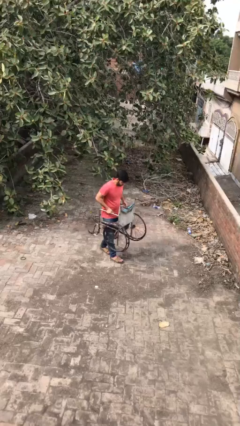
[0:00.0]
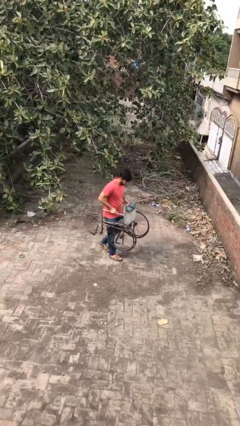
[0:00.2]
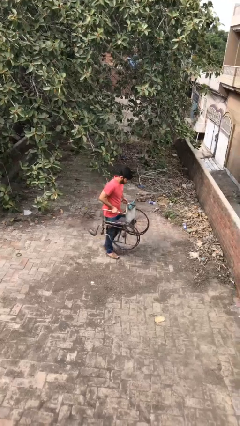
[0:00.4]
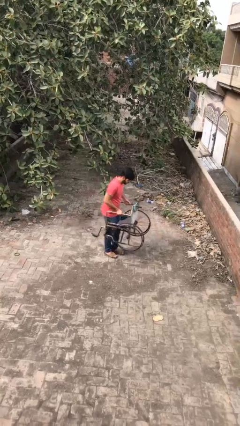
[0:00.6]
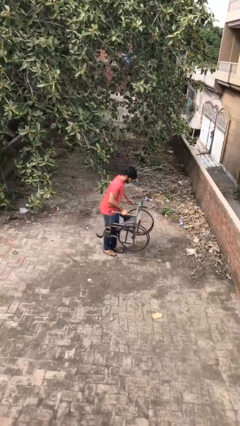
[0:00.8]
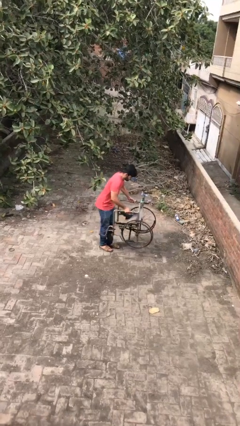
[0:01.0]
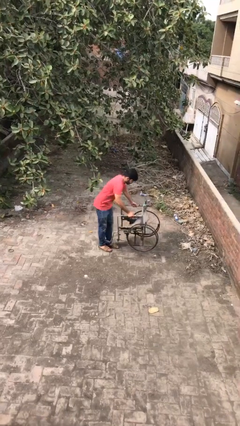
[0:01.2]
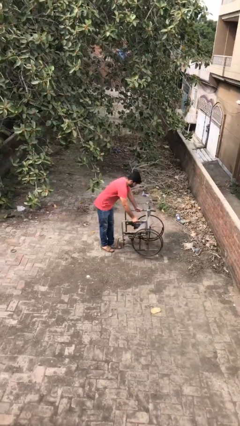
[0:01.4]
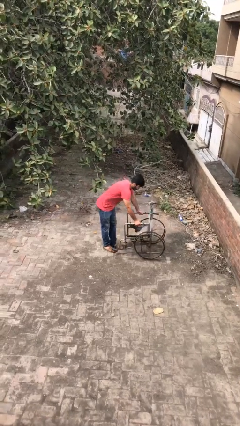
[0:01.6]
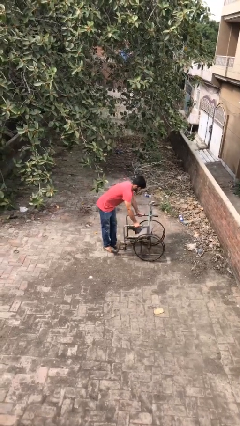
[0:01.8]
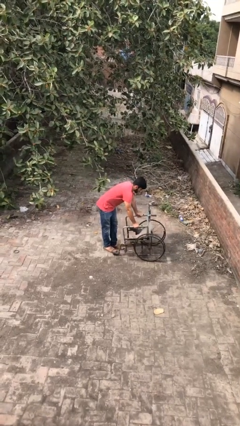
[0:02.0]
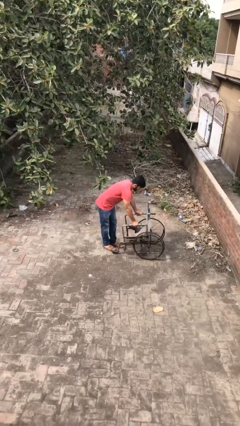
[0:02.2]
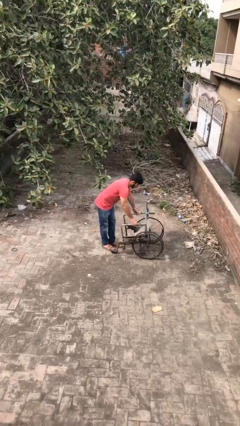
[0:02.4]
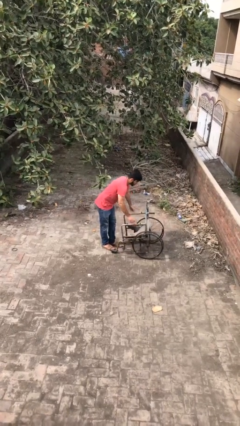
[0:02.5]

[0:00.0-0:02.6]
person puts down object on floor

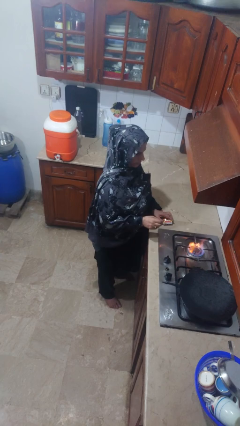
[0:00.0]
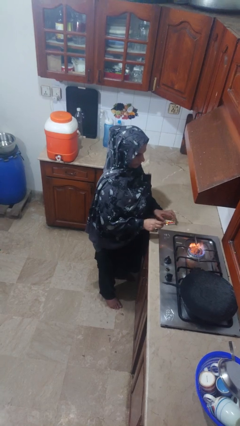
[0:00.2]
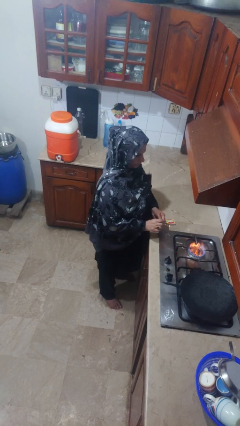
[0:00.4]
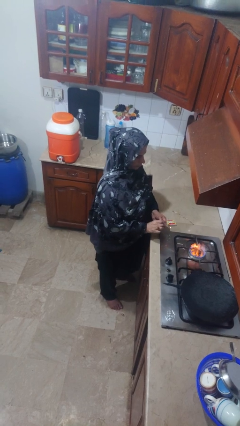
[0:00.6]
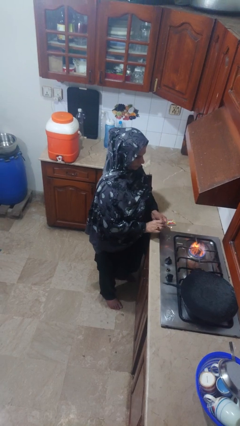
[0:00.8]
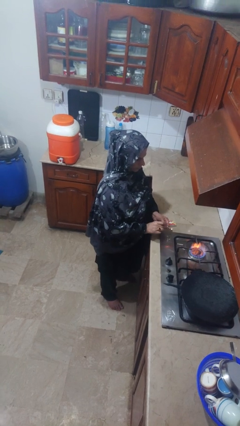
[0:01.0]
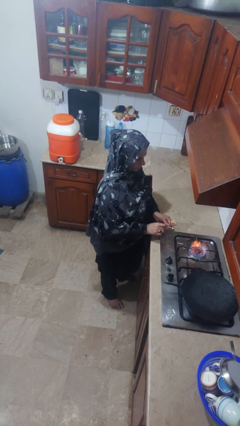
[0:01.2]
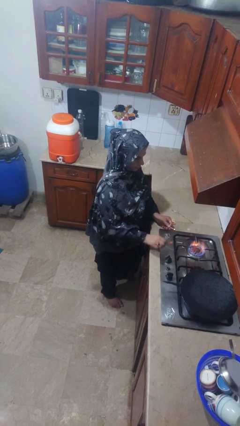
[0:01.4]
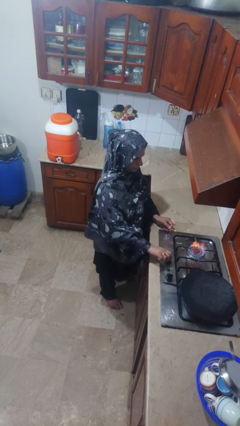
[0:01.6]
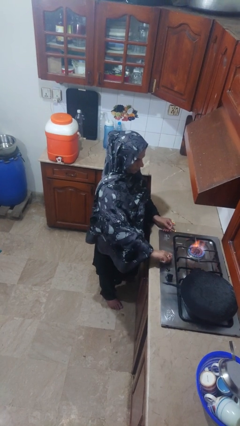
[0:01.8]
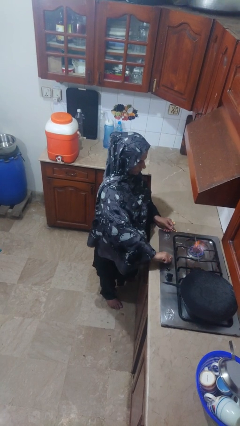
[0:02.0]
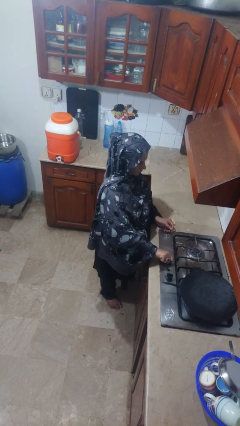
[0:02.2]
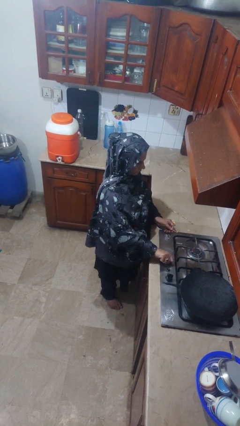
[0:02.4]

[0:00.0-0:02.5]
person turns off stovetop

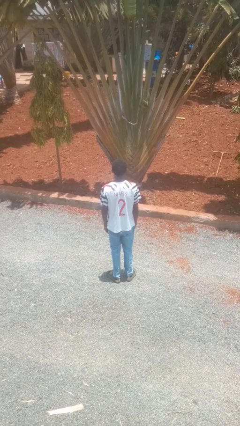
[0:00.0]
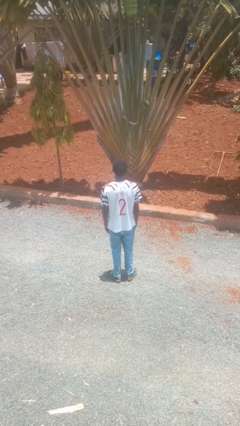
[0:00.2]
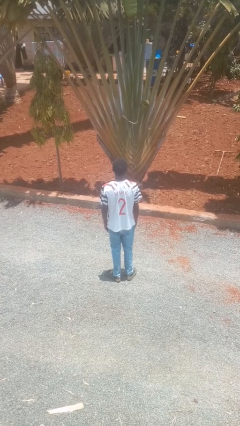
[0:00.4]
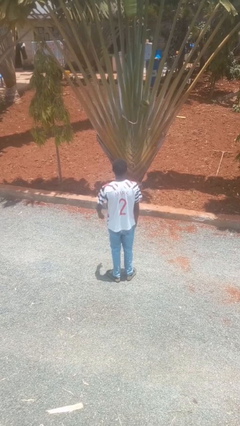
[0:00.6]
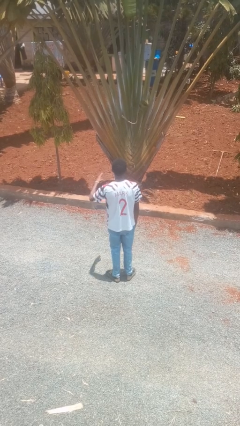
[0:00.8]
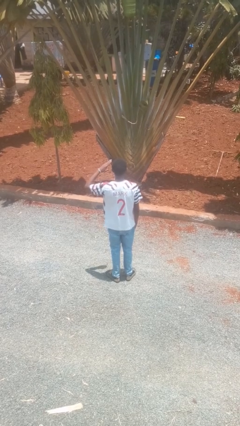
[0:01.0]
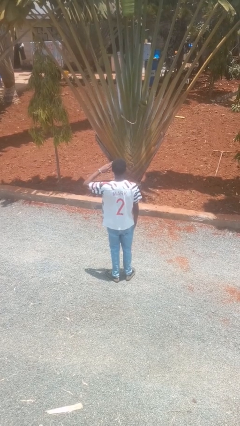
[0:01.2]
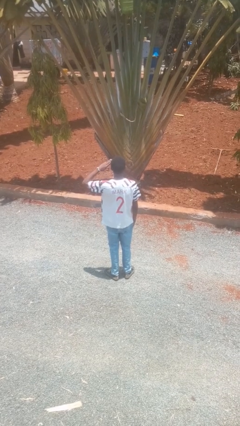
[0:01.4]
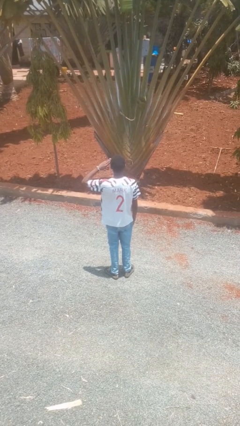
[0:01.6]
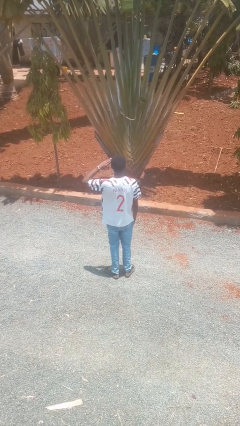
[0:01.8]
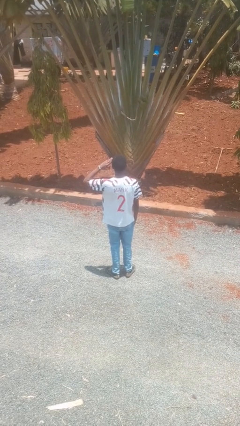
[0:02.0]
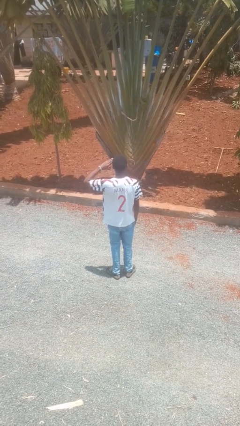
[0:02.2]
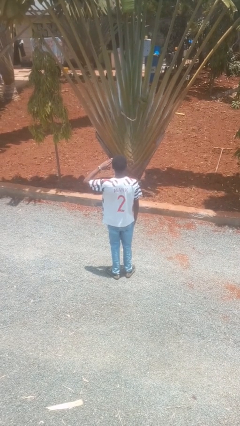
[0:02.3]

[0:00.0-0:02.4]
person salutes

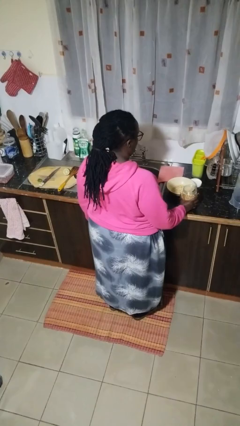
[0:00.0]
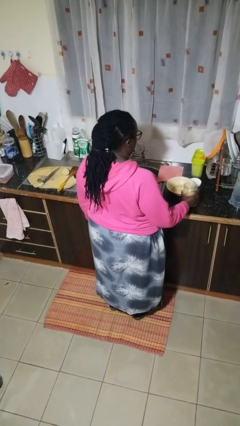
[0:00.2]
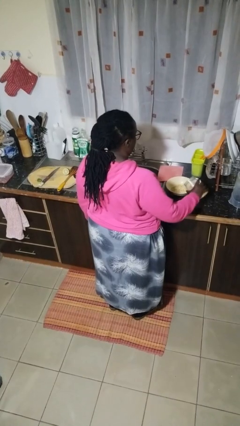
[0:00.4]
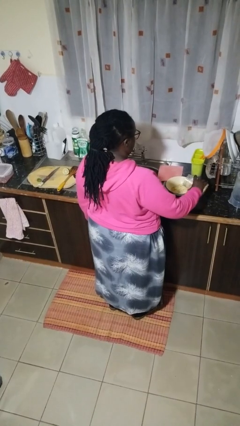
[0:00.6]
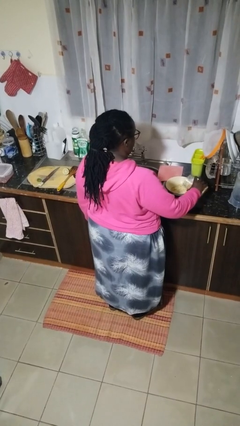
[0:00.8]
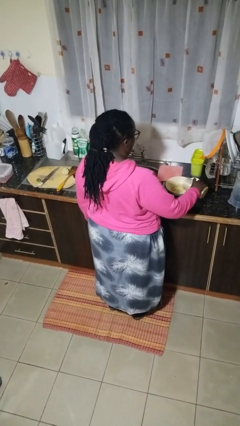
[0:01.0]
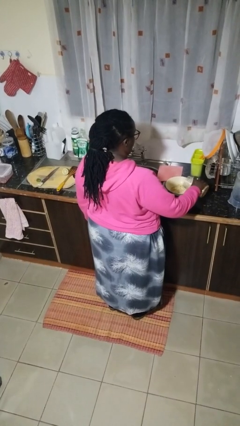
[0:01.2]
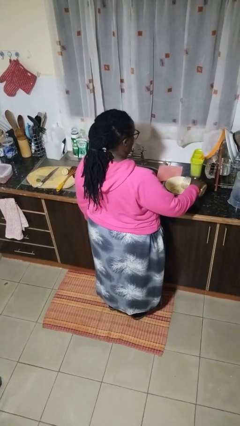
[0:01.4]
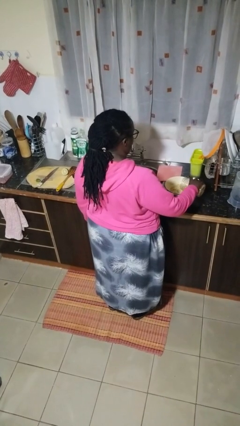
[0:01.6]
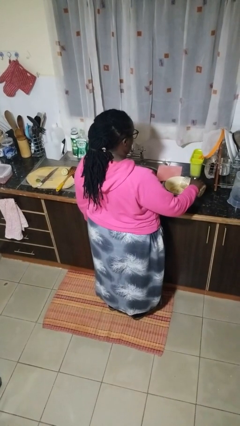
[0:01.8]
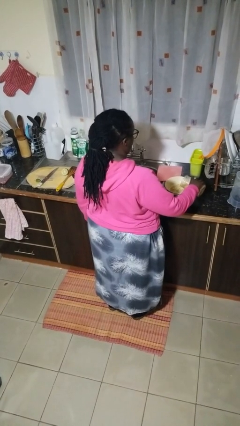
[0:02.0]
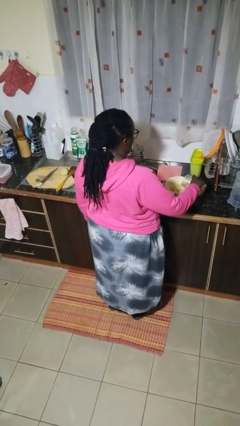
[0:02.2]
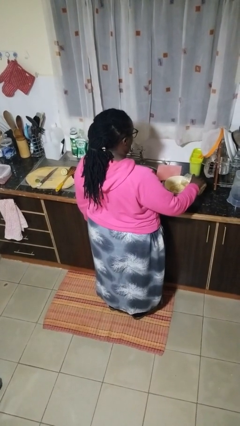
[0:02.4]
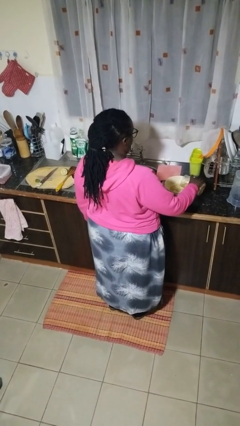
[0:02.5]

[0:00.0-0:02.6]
person pours into bowl

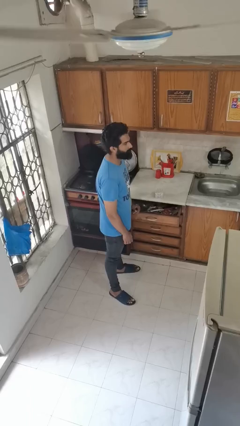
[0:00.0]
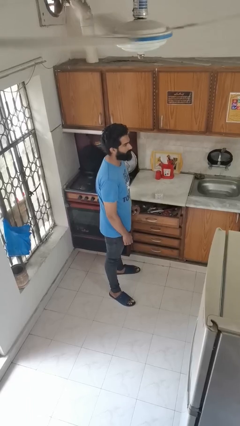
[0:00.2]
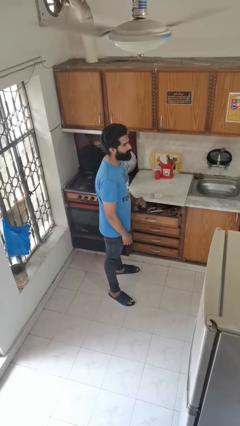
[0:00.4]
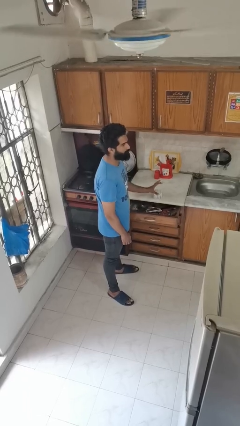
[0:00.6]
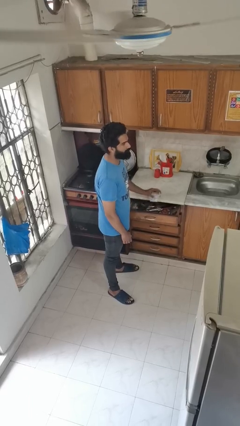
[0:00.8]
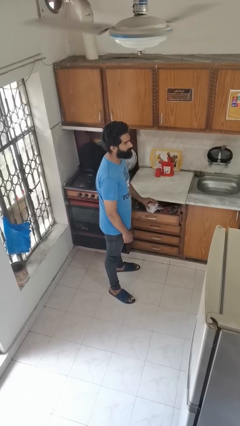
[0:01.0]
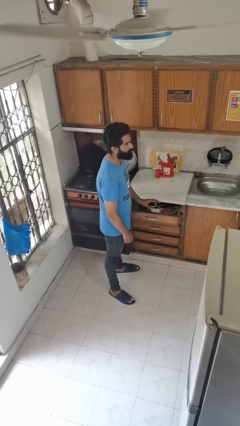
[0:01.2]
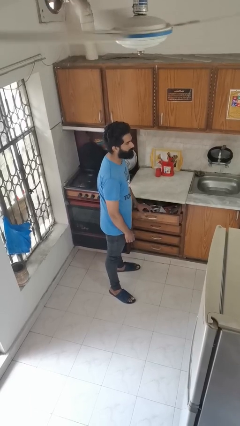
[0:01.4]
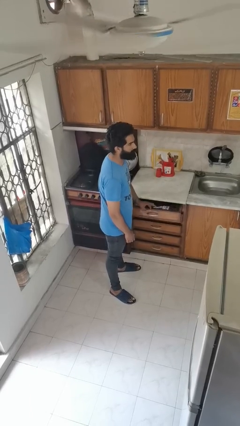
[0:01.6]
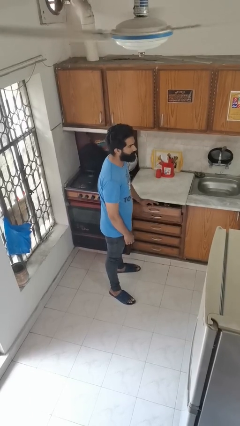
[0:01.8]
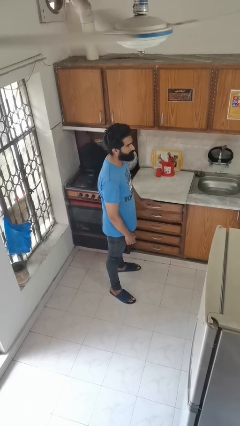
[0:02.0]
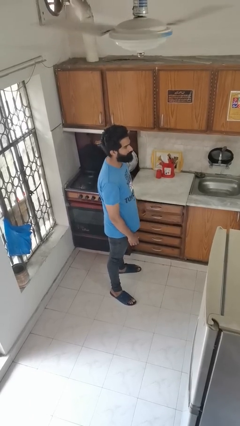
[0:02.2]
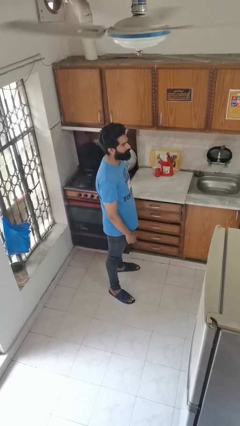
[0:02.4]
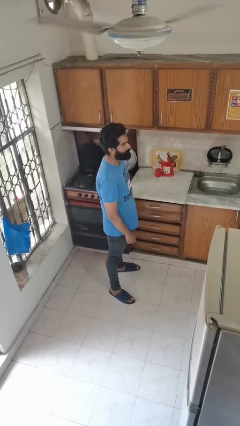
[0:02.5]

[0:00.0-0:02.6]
person puts object into kitchen drawer

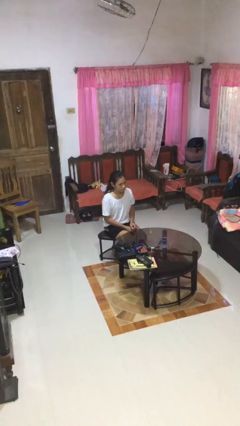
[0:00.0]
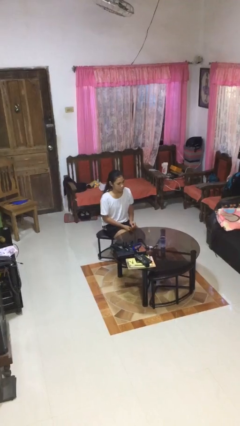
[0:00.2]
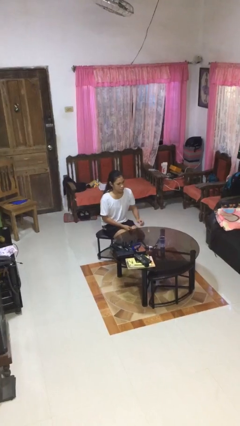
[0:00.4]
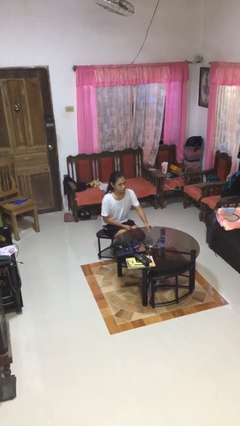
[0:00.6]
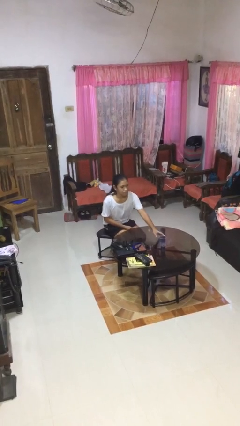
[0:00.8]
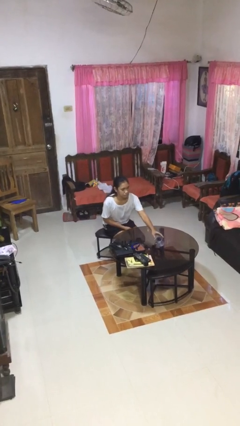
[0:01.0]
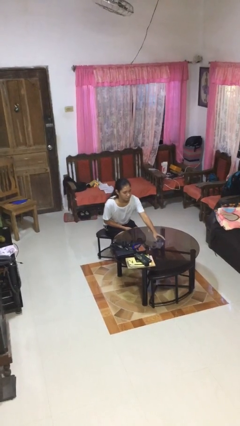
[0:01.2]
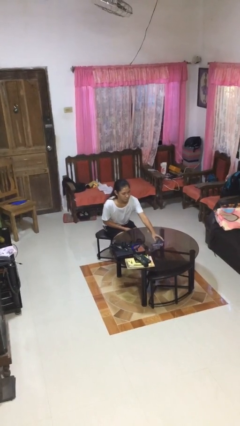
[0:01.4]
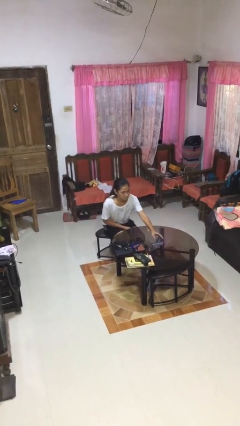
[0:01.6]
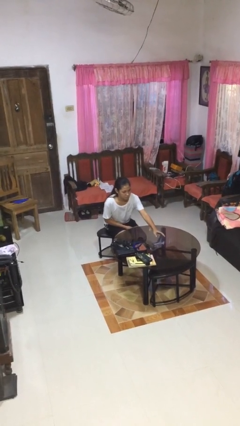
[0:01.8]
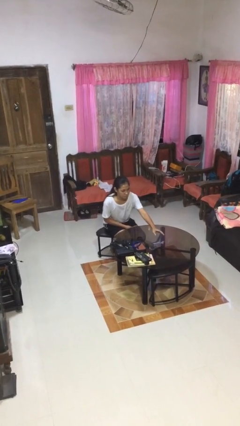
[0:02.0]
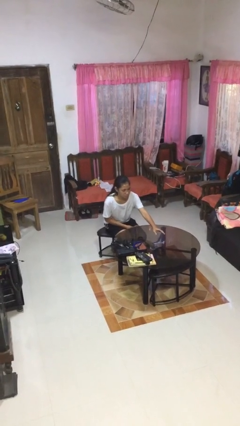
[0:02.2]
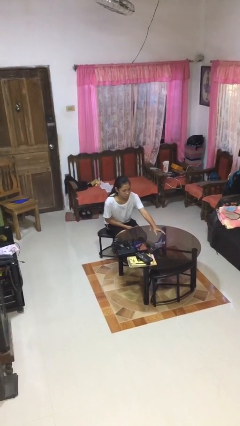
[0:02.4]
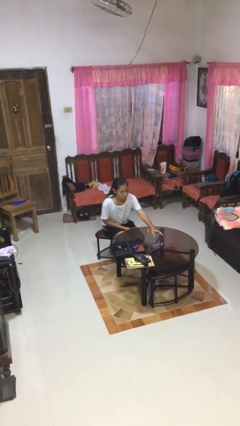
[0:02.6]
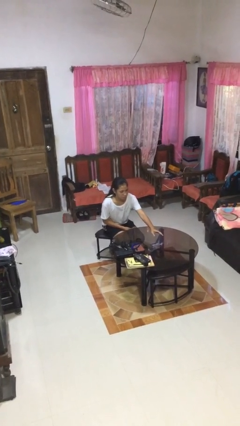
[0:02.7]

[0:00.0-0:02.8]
person knocks over glass

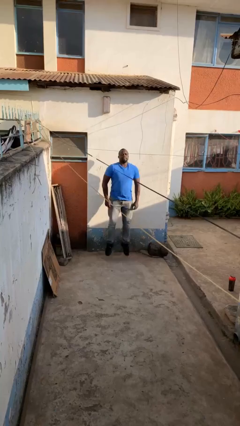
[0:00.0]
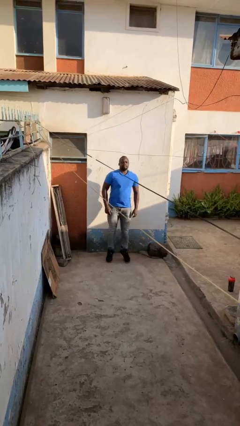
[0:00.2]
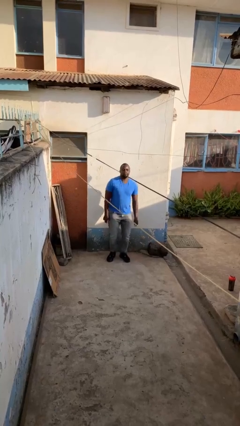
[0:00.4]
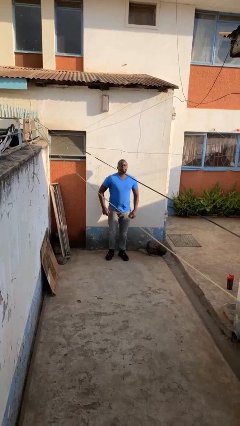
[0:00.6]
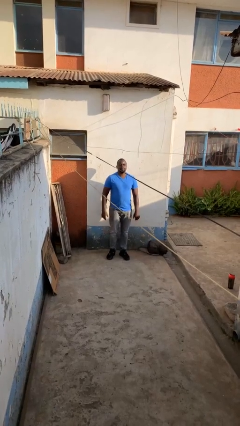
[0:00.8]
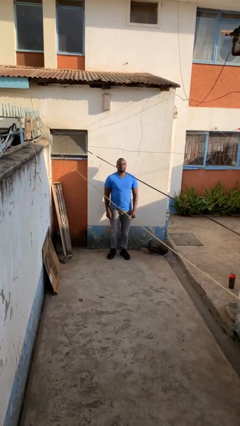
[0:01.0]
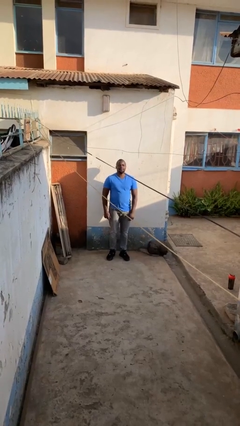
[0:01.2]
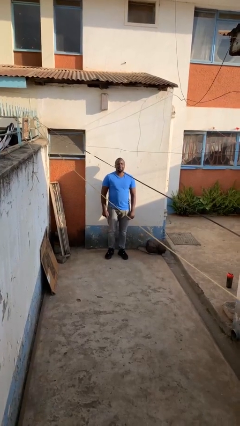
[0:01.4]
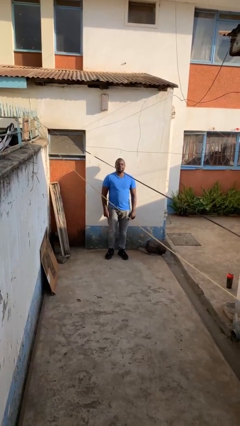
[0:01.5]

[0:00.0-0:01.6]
person jumps
